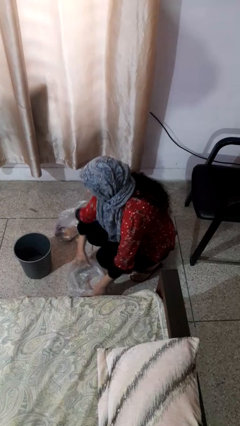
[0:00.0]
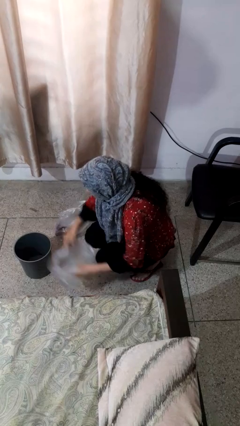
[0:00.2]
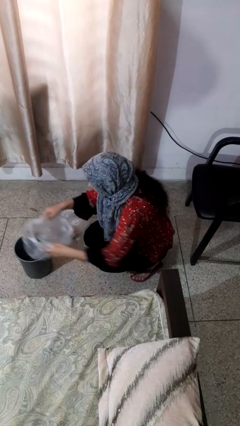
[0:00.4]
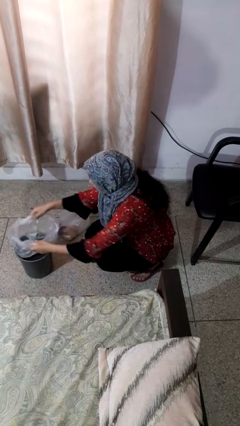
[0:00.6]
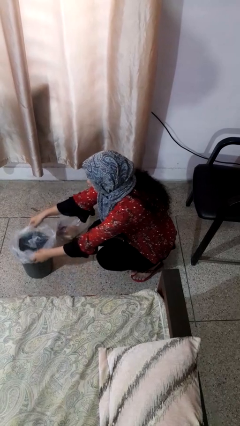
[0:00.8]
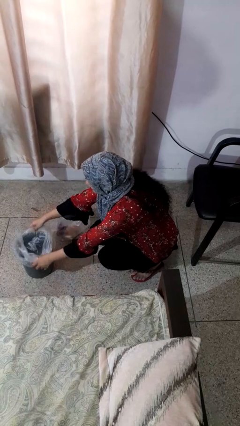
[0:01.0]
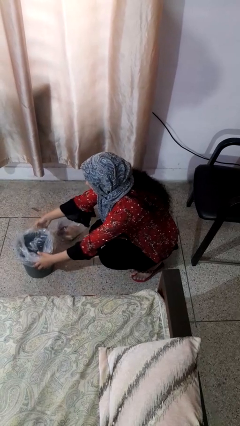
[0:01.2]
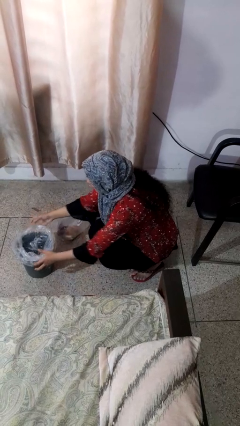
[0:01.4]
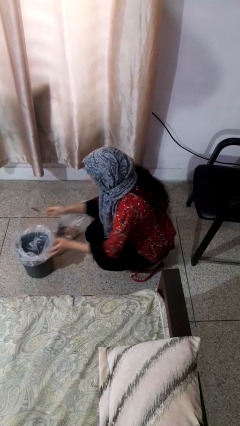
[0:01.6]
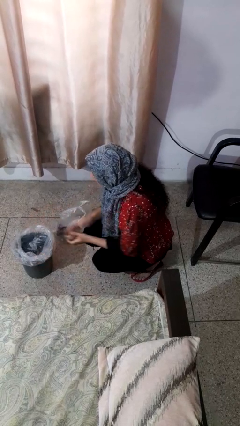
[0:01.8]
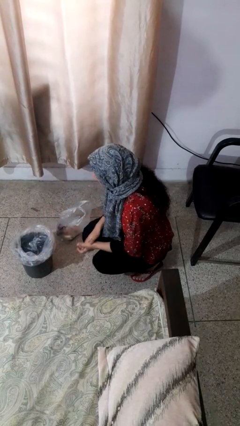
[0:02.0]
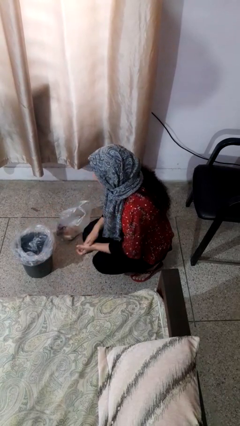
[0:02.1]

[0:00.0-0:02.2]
person inserts trashbag into trashcan

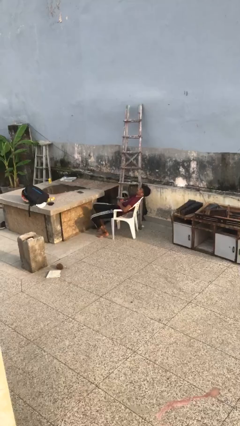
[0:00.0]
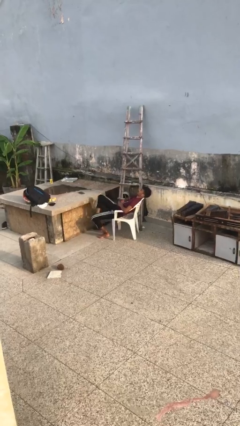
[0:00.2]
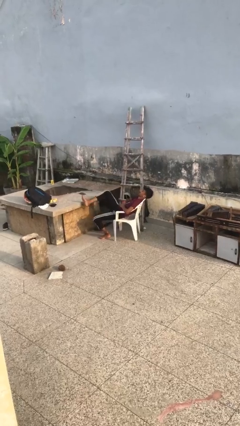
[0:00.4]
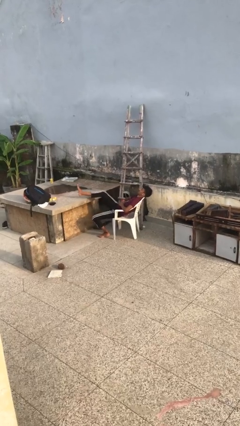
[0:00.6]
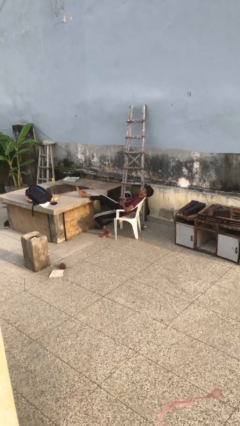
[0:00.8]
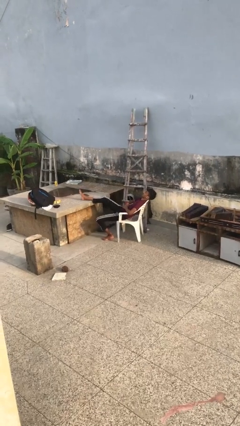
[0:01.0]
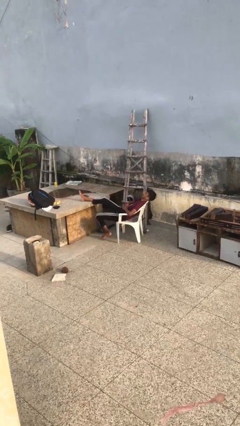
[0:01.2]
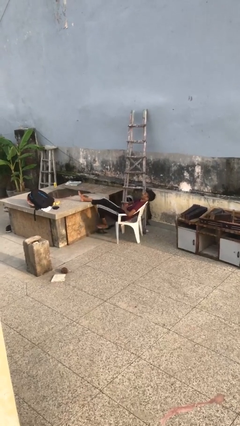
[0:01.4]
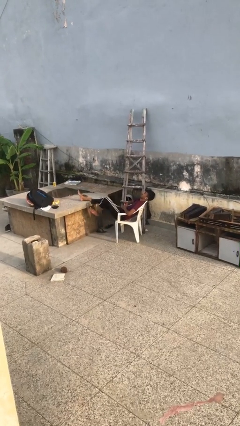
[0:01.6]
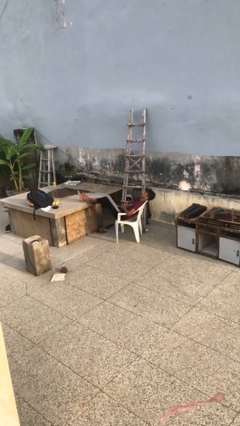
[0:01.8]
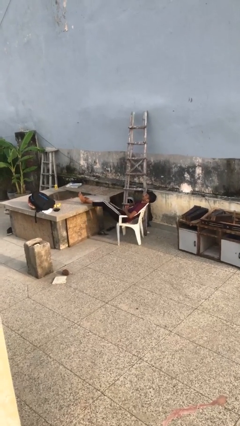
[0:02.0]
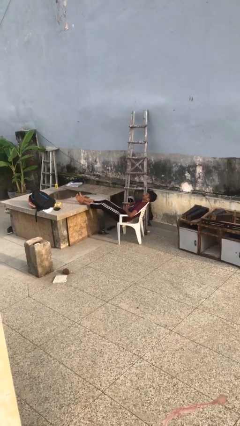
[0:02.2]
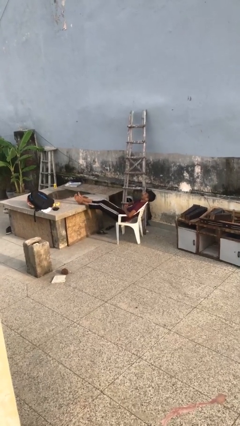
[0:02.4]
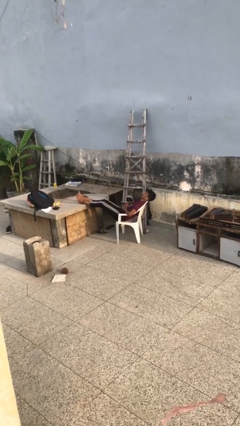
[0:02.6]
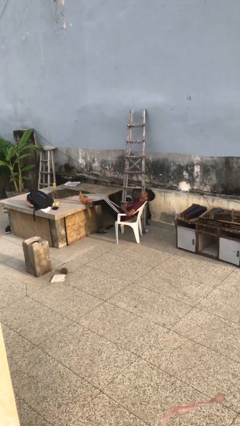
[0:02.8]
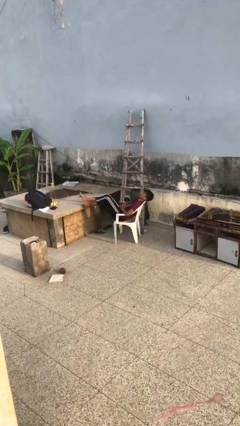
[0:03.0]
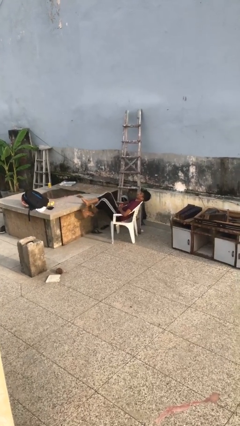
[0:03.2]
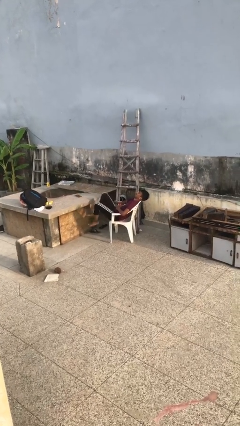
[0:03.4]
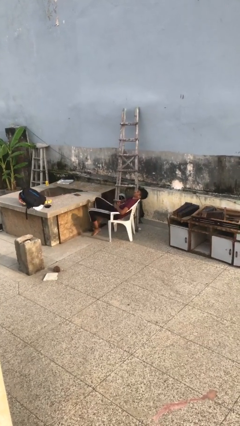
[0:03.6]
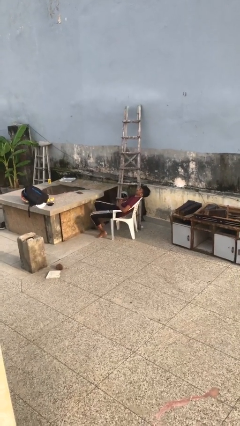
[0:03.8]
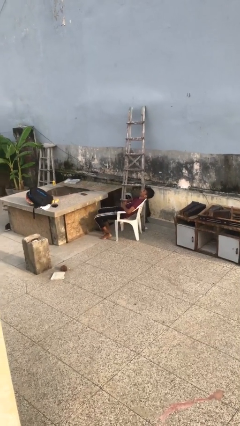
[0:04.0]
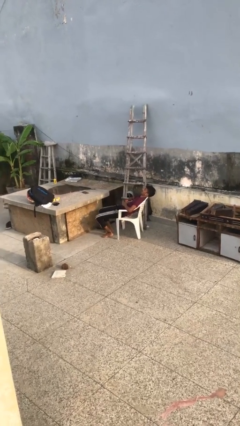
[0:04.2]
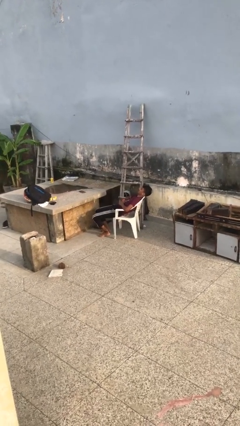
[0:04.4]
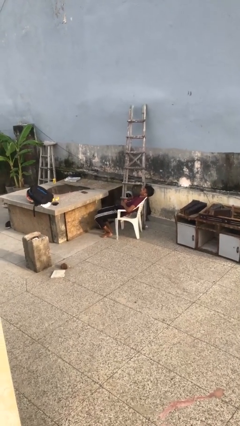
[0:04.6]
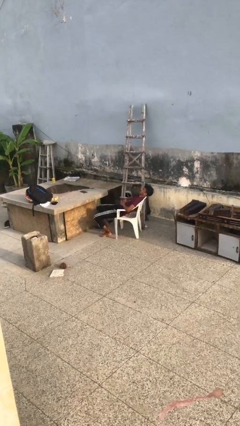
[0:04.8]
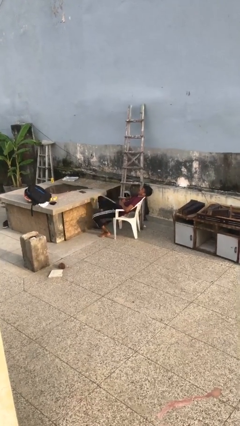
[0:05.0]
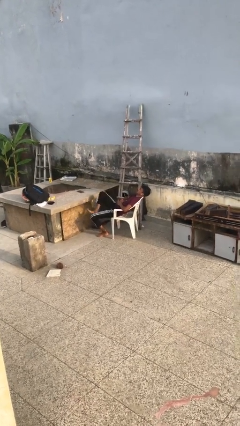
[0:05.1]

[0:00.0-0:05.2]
person puts feet up

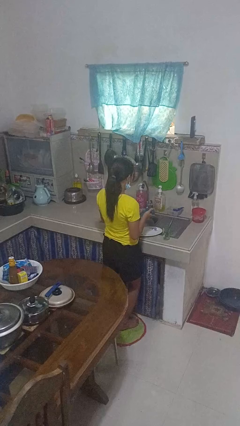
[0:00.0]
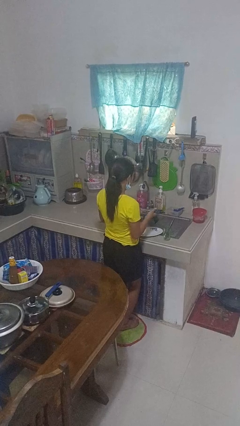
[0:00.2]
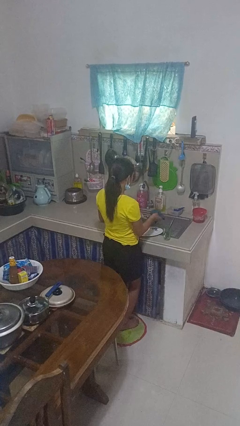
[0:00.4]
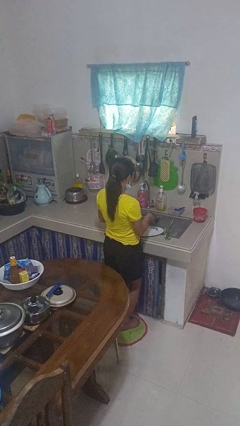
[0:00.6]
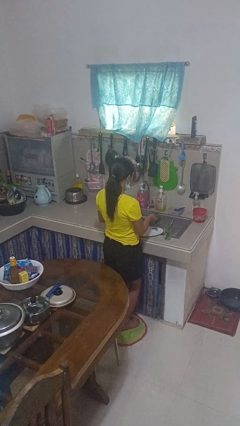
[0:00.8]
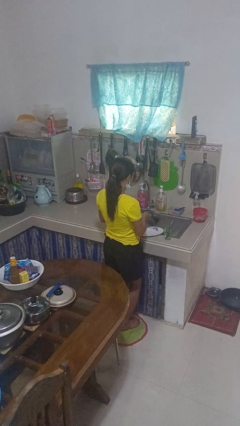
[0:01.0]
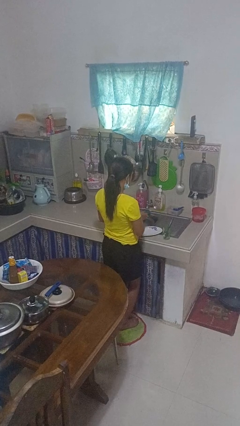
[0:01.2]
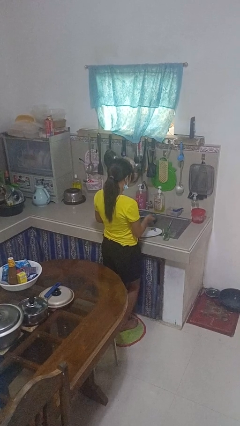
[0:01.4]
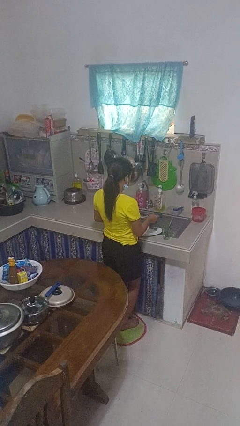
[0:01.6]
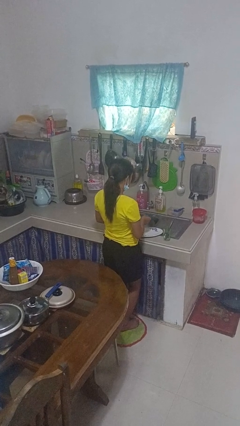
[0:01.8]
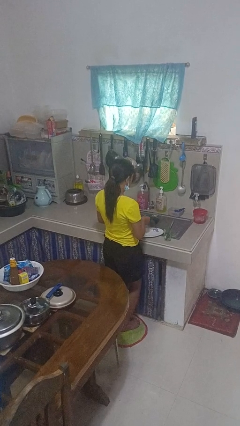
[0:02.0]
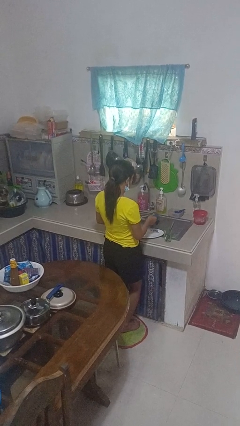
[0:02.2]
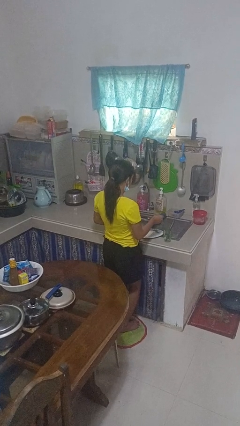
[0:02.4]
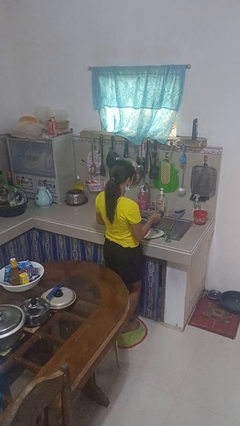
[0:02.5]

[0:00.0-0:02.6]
person dries dish

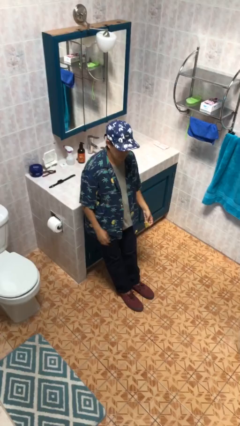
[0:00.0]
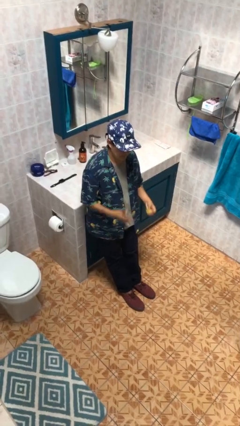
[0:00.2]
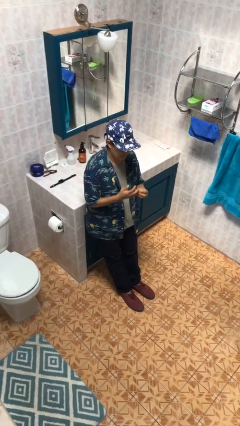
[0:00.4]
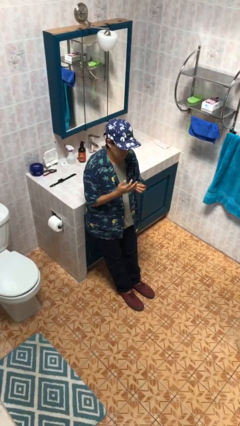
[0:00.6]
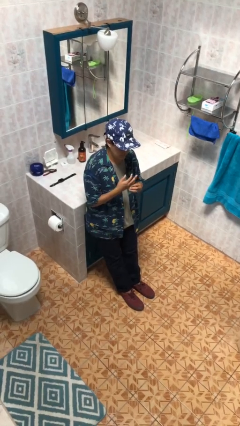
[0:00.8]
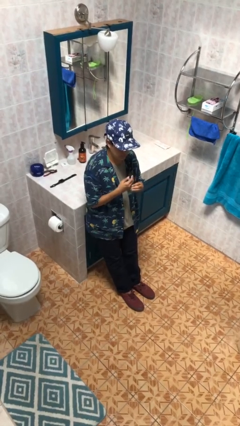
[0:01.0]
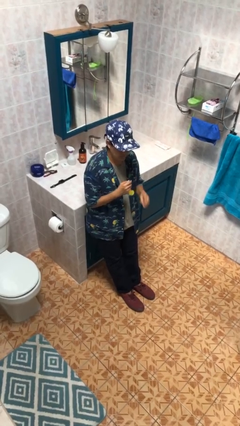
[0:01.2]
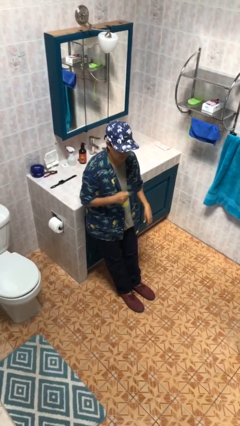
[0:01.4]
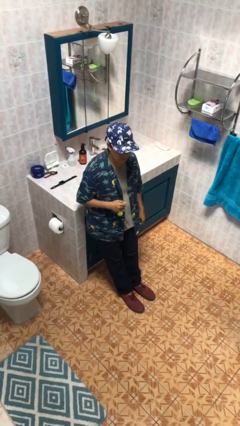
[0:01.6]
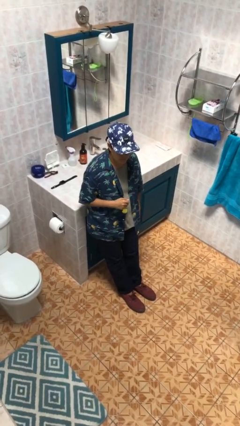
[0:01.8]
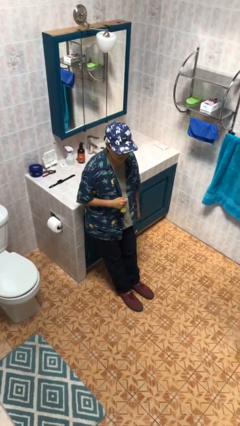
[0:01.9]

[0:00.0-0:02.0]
person puts on ring

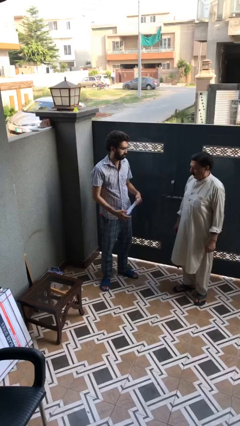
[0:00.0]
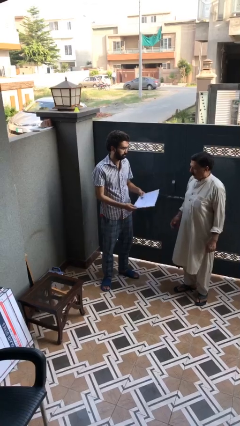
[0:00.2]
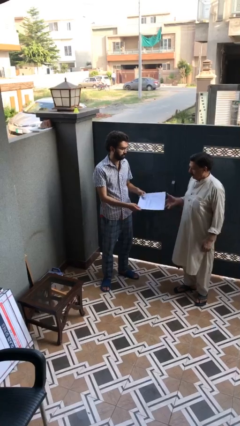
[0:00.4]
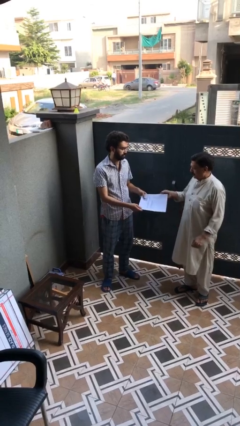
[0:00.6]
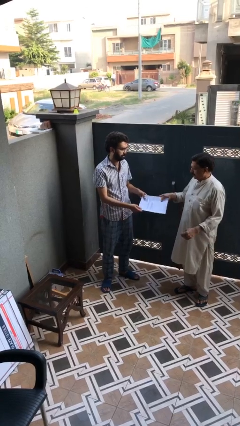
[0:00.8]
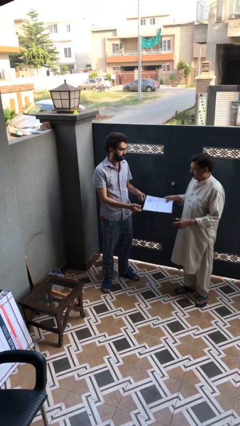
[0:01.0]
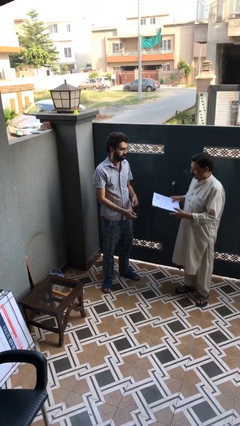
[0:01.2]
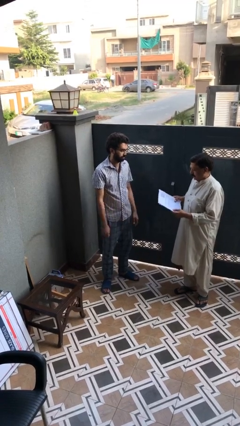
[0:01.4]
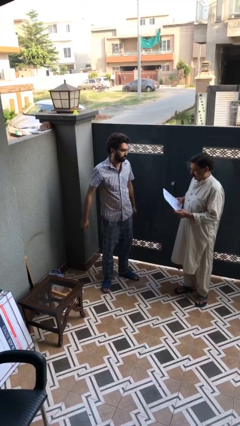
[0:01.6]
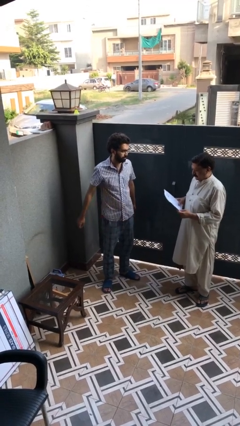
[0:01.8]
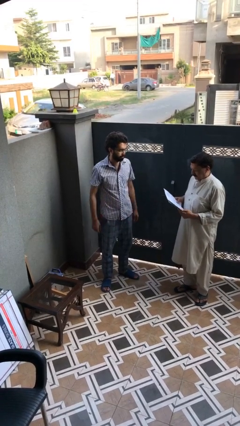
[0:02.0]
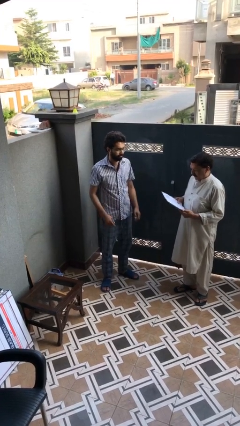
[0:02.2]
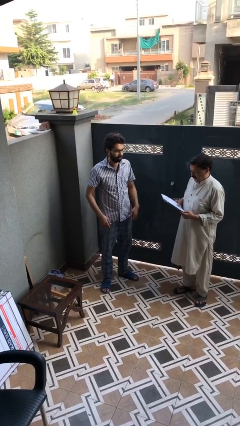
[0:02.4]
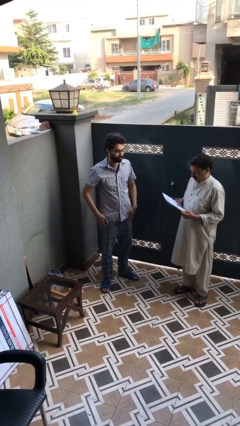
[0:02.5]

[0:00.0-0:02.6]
person transfers object to person

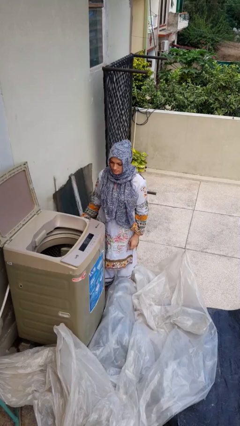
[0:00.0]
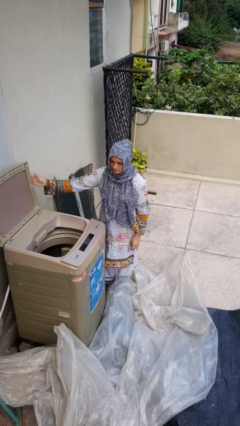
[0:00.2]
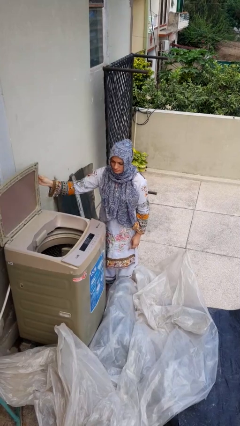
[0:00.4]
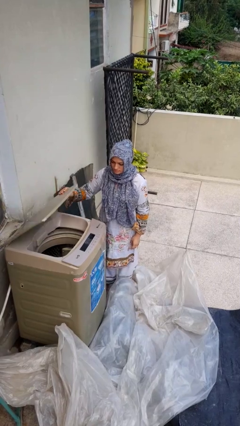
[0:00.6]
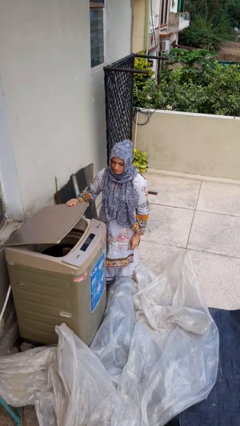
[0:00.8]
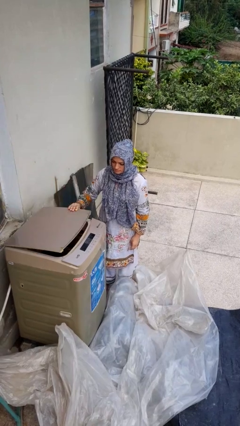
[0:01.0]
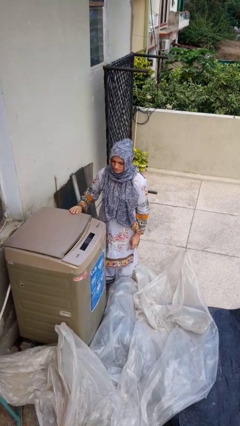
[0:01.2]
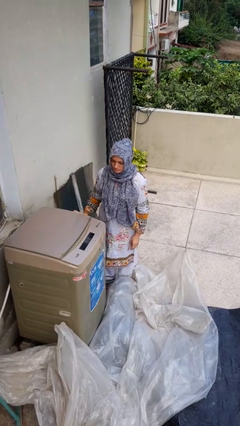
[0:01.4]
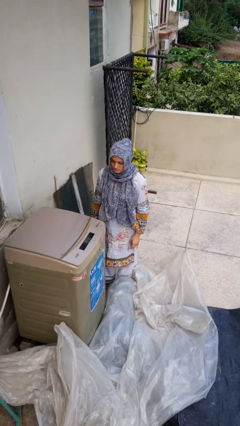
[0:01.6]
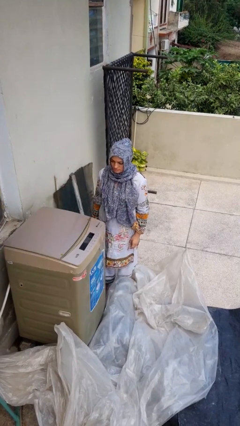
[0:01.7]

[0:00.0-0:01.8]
person closes clothes washer

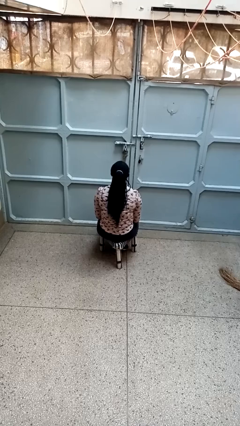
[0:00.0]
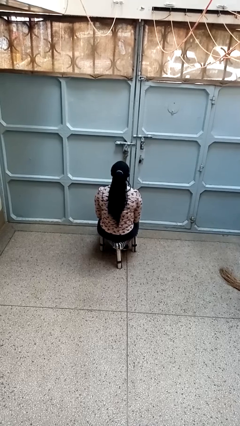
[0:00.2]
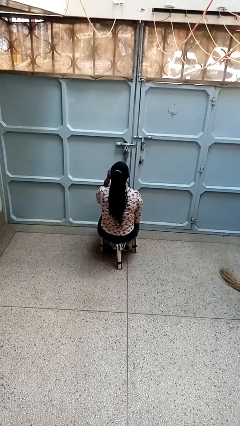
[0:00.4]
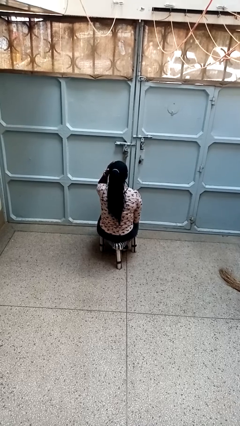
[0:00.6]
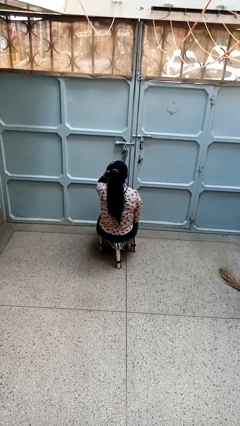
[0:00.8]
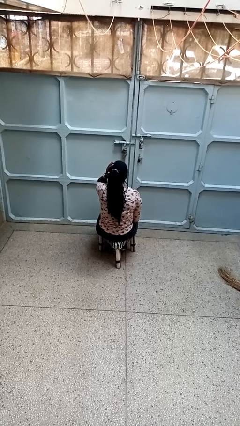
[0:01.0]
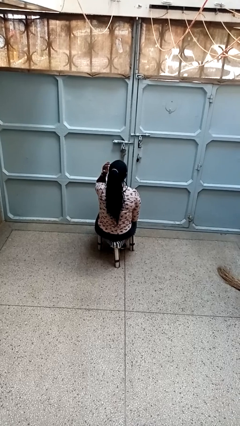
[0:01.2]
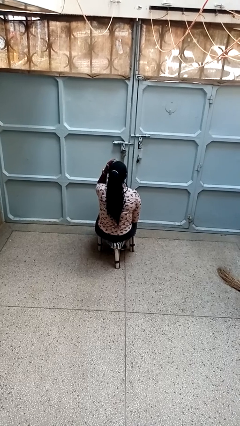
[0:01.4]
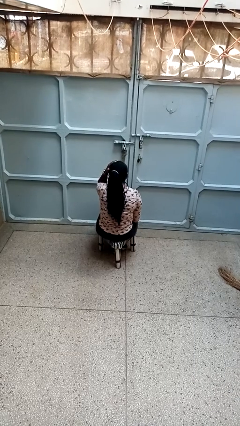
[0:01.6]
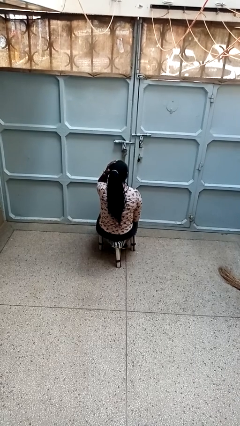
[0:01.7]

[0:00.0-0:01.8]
person strokes hair
